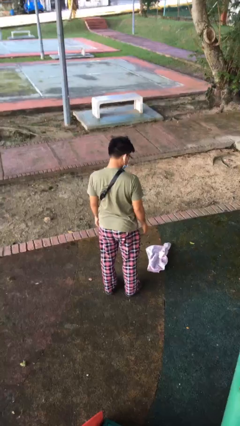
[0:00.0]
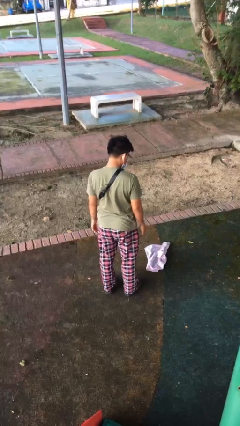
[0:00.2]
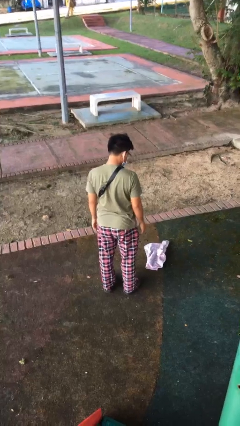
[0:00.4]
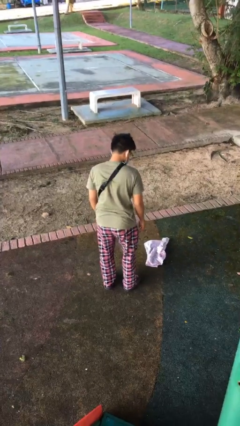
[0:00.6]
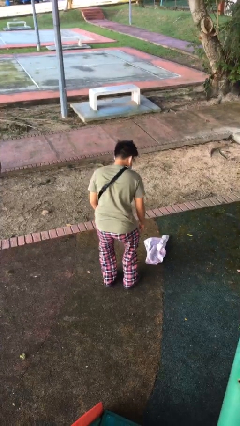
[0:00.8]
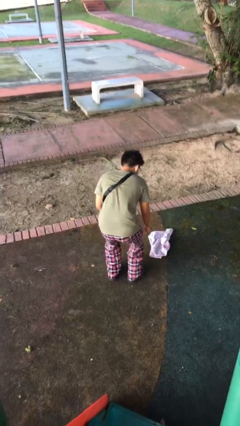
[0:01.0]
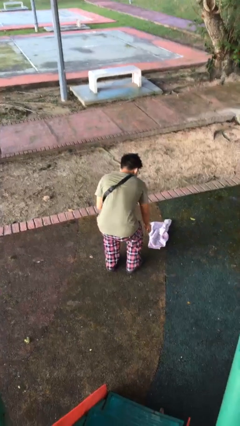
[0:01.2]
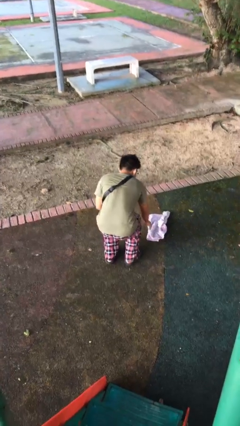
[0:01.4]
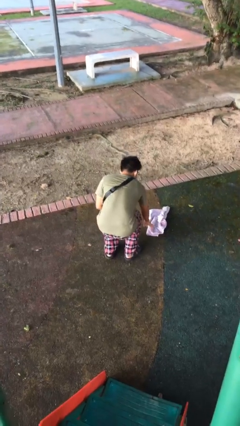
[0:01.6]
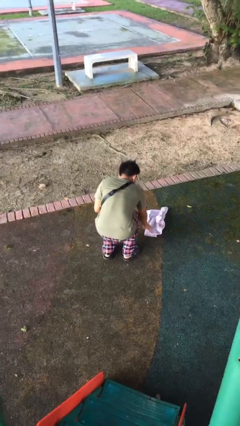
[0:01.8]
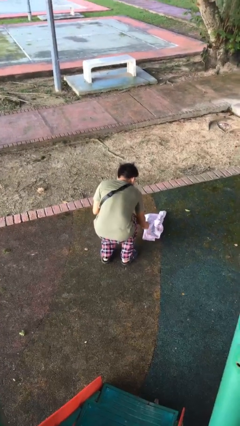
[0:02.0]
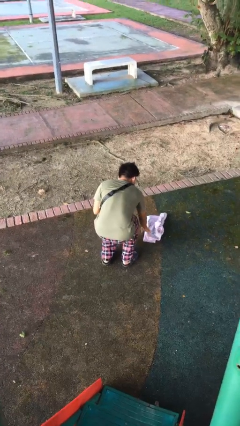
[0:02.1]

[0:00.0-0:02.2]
person picks up object from floor

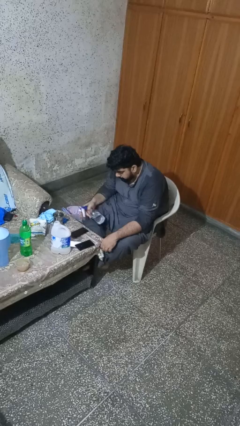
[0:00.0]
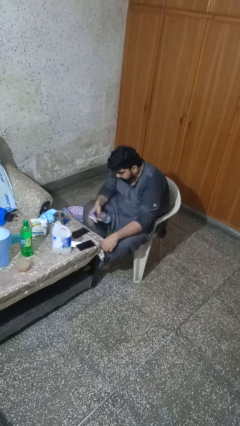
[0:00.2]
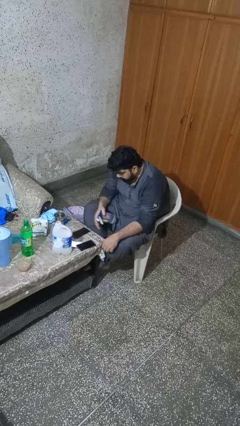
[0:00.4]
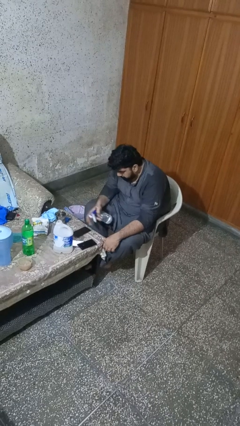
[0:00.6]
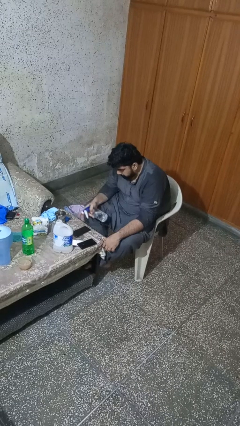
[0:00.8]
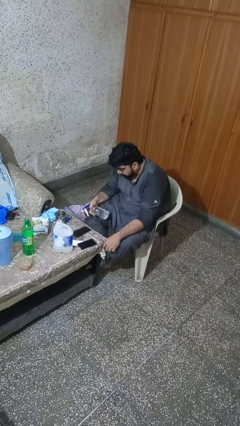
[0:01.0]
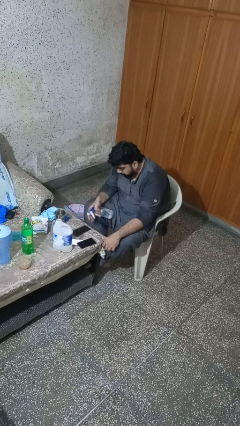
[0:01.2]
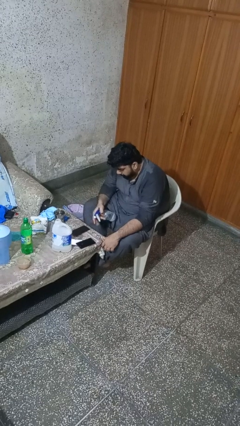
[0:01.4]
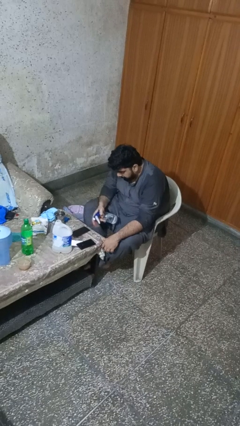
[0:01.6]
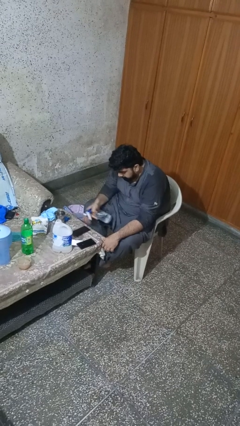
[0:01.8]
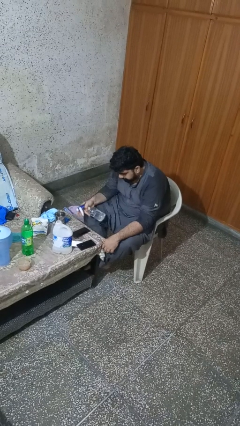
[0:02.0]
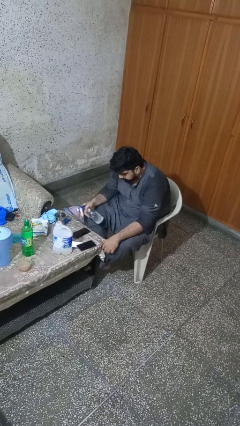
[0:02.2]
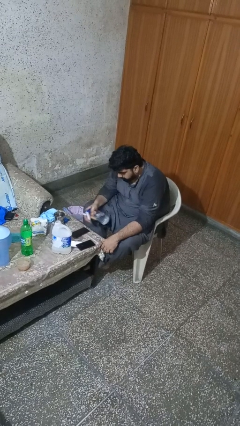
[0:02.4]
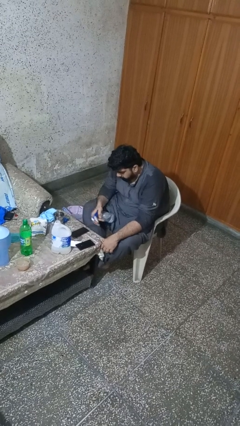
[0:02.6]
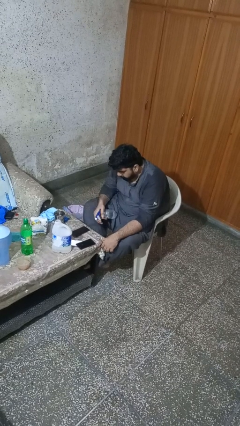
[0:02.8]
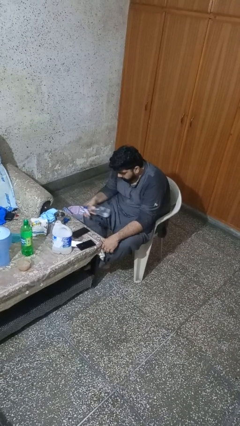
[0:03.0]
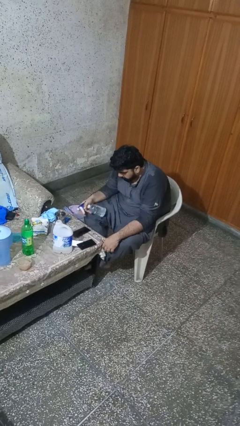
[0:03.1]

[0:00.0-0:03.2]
person sprays from bottle

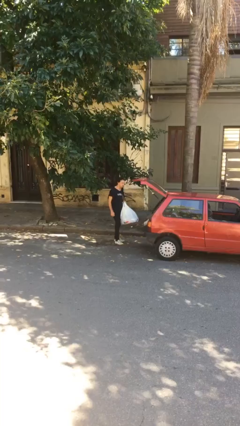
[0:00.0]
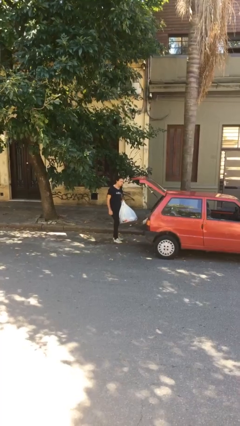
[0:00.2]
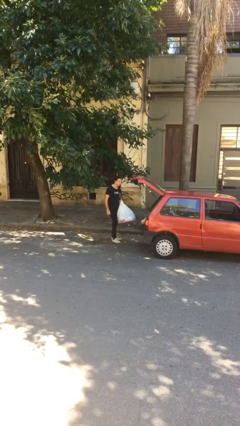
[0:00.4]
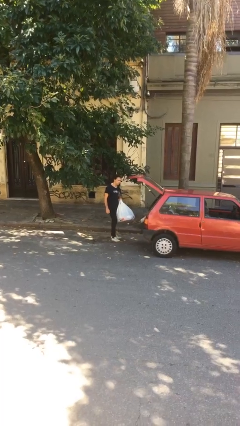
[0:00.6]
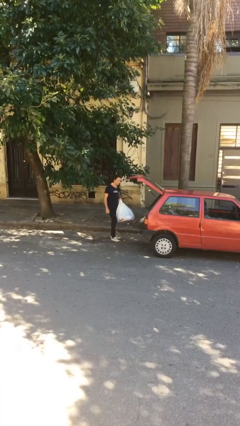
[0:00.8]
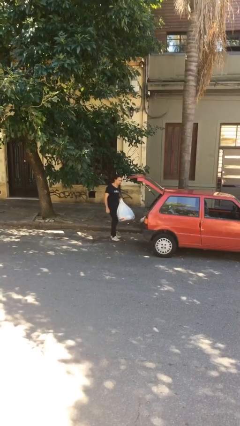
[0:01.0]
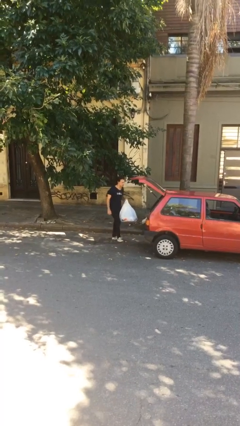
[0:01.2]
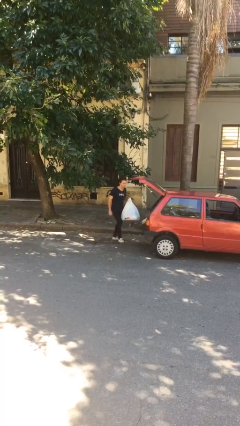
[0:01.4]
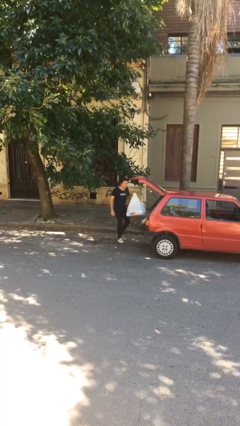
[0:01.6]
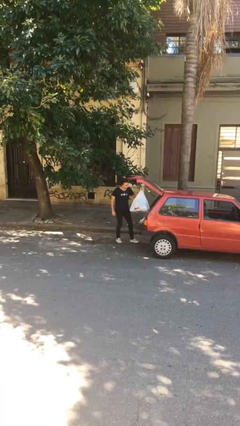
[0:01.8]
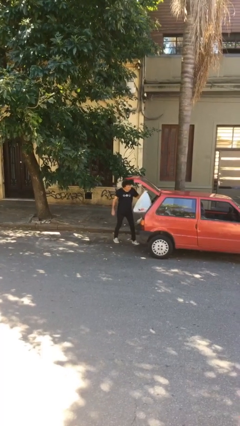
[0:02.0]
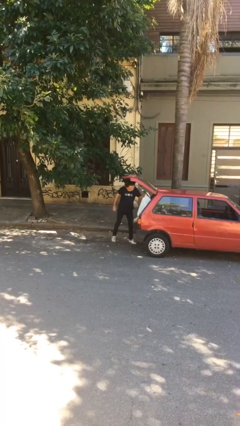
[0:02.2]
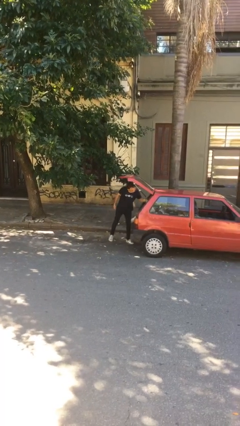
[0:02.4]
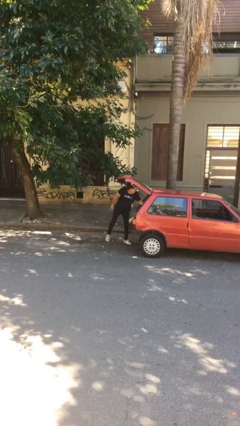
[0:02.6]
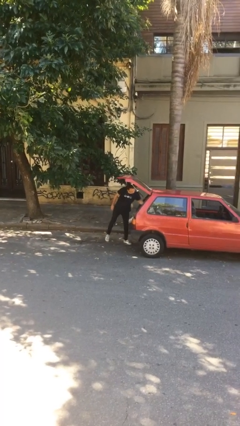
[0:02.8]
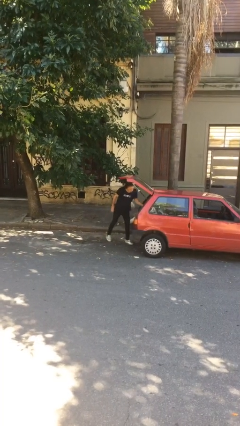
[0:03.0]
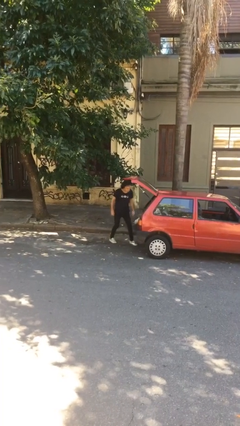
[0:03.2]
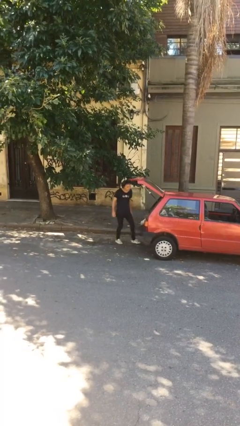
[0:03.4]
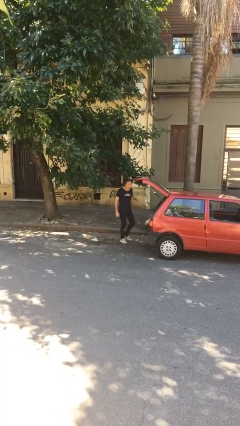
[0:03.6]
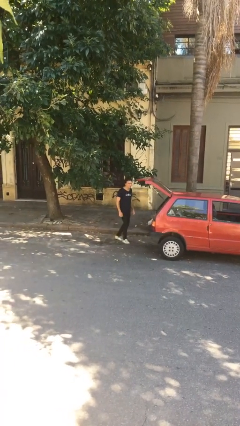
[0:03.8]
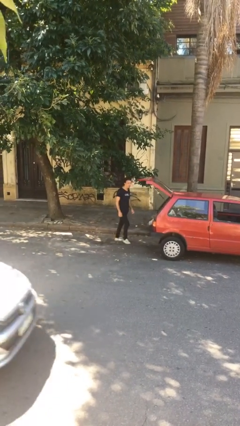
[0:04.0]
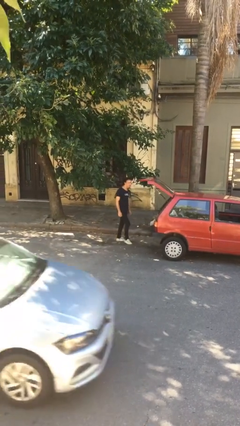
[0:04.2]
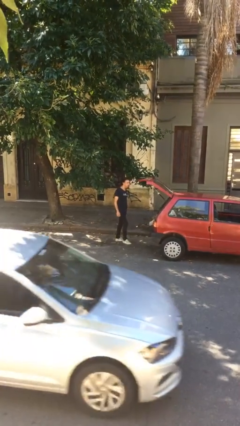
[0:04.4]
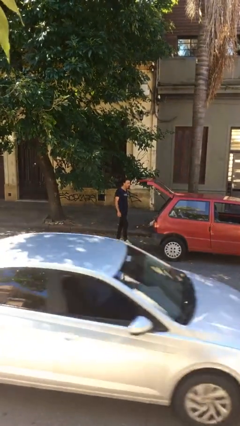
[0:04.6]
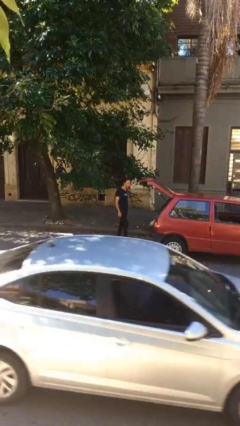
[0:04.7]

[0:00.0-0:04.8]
person loads car

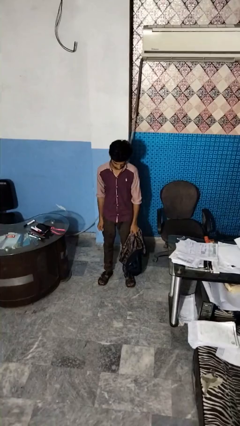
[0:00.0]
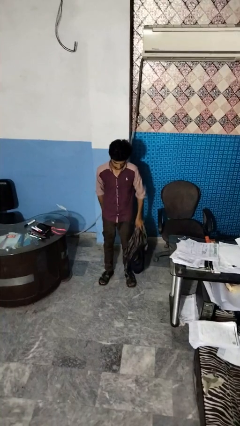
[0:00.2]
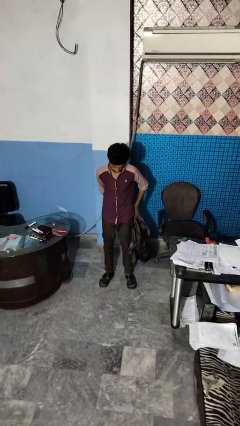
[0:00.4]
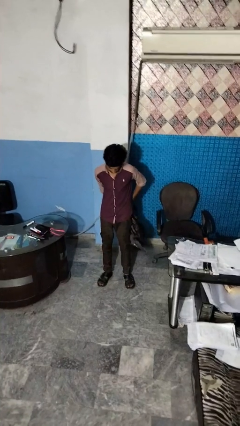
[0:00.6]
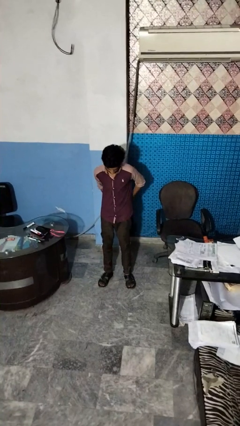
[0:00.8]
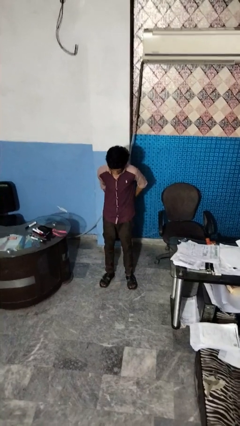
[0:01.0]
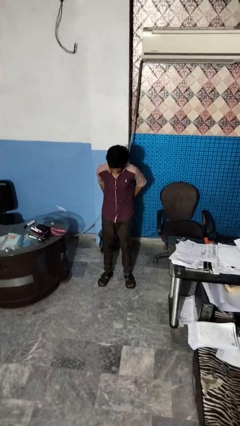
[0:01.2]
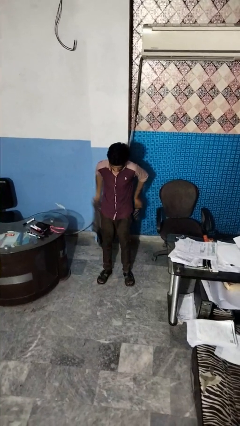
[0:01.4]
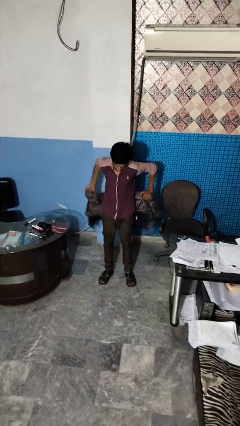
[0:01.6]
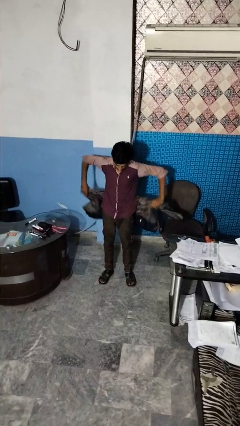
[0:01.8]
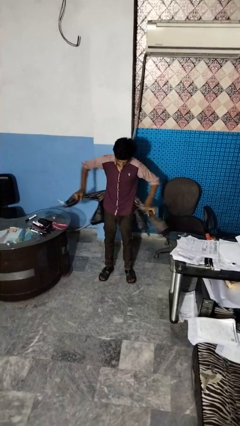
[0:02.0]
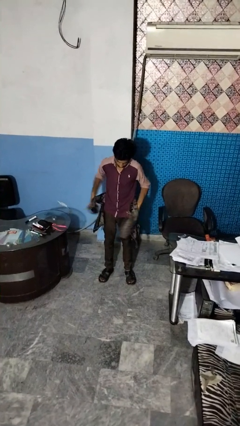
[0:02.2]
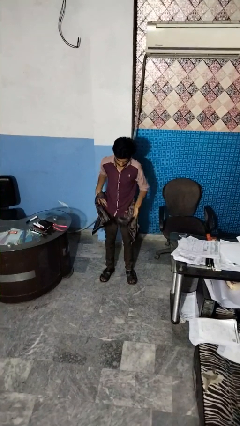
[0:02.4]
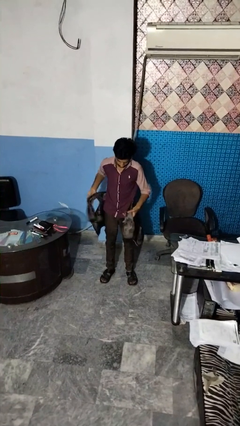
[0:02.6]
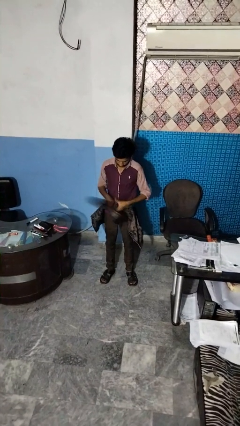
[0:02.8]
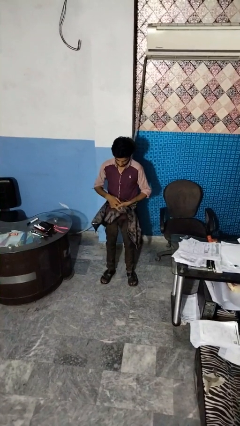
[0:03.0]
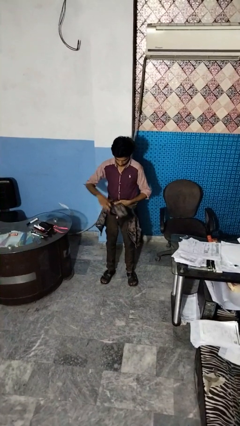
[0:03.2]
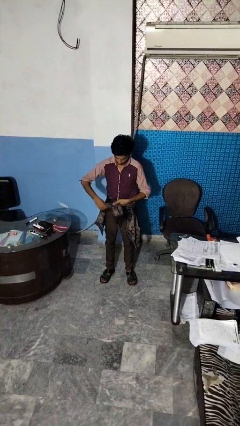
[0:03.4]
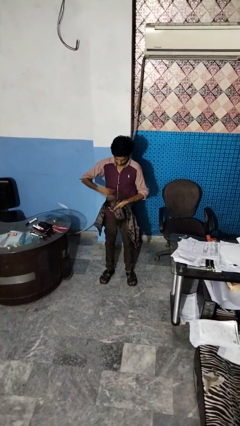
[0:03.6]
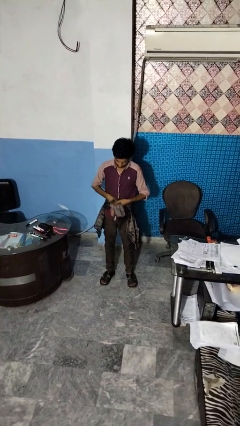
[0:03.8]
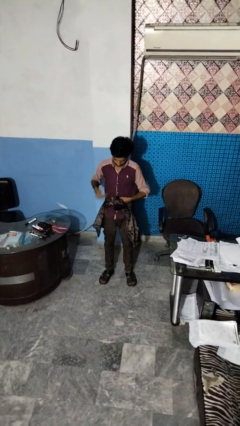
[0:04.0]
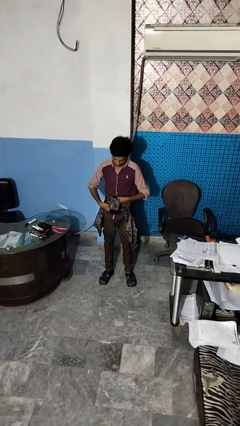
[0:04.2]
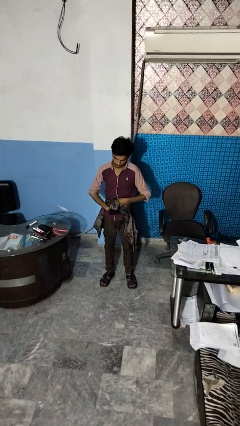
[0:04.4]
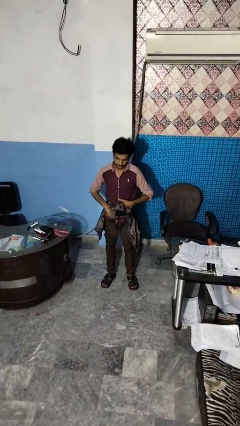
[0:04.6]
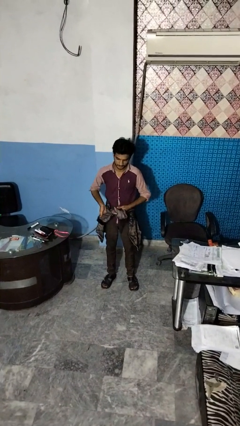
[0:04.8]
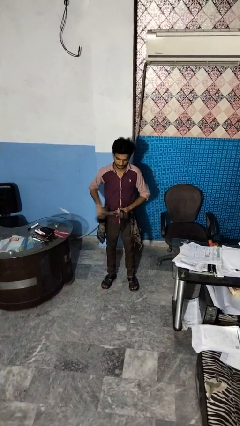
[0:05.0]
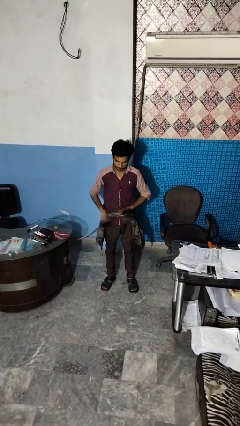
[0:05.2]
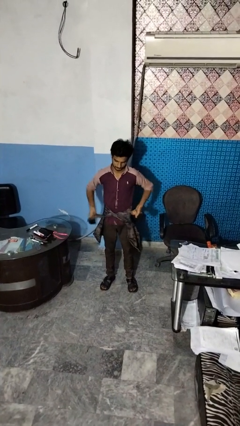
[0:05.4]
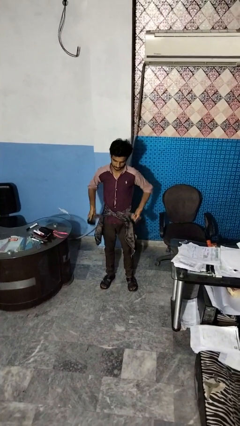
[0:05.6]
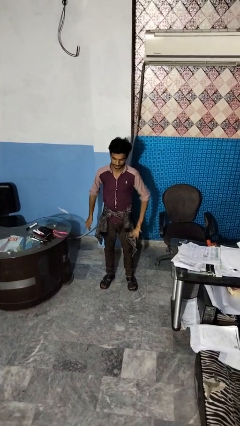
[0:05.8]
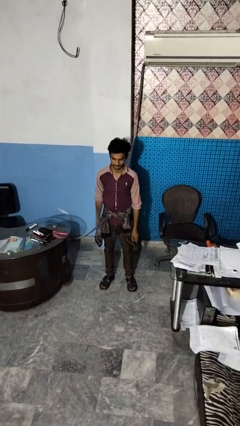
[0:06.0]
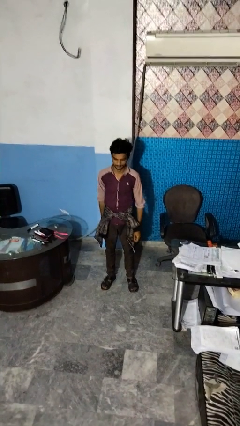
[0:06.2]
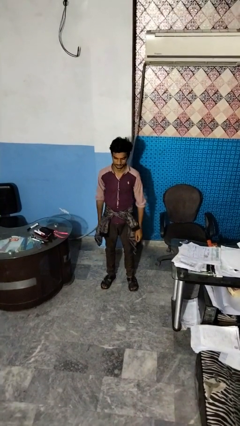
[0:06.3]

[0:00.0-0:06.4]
person ties jacket around waist

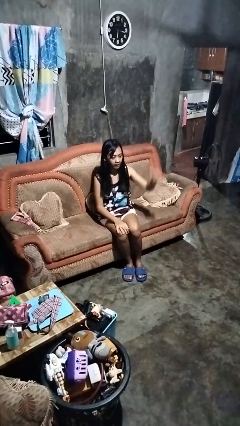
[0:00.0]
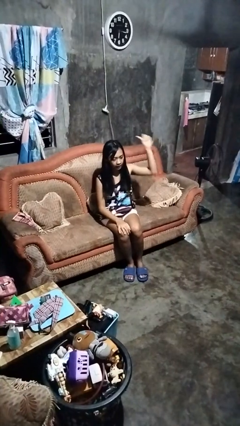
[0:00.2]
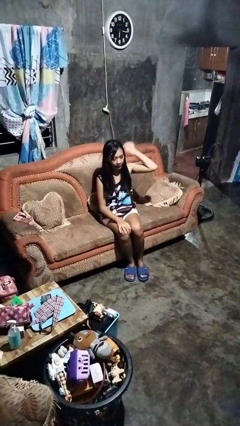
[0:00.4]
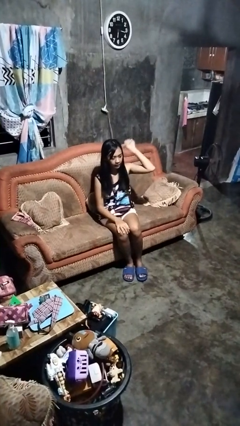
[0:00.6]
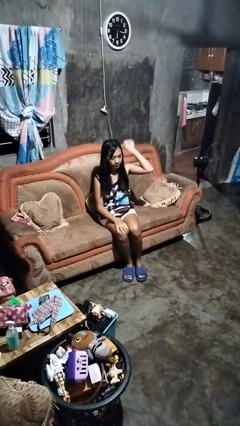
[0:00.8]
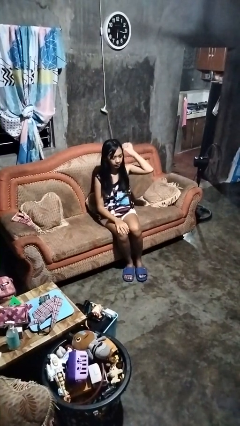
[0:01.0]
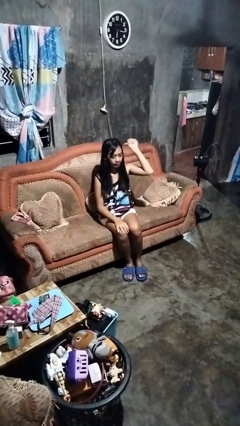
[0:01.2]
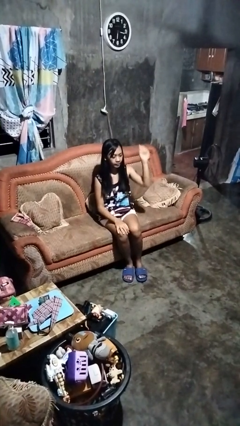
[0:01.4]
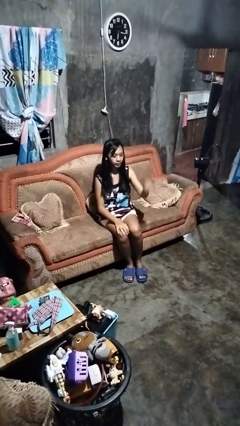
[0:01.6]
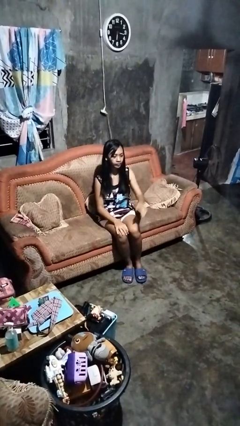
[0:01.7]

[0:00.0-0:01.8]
person gestures behind me
